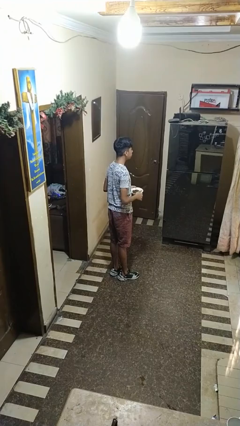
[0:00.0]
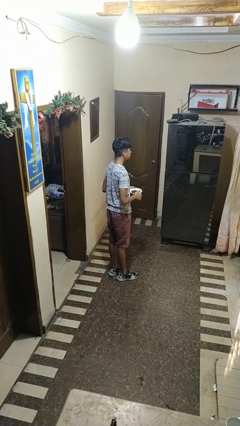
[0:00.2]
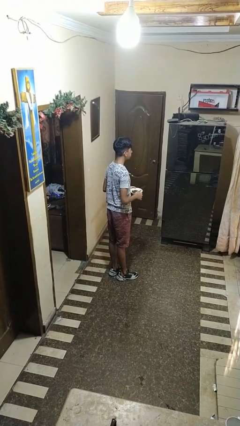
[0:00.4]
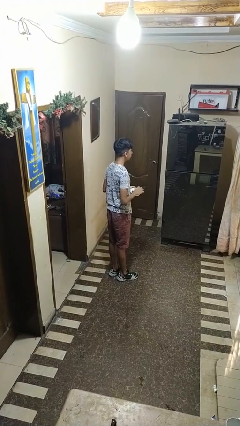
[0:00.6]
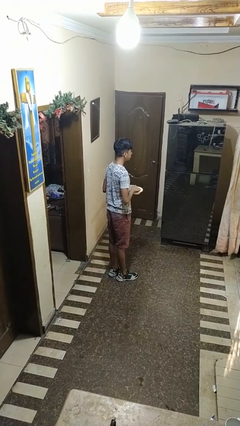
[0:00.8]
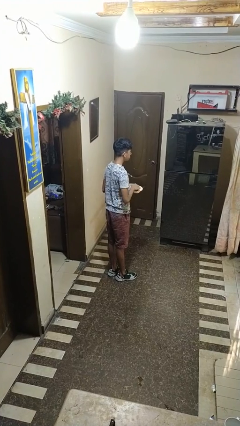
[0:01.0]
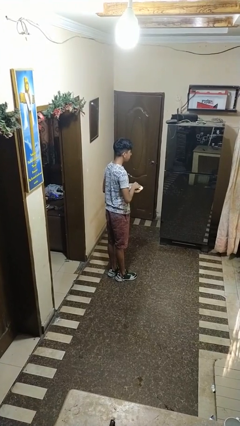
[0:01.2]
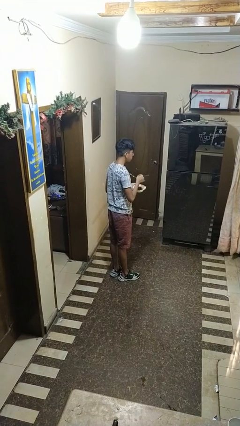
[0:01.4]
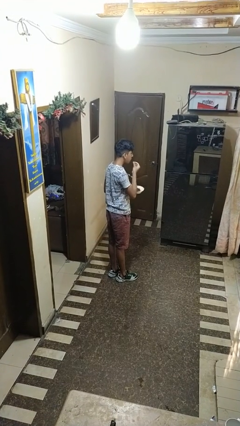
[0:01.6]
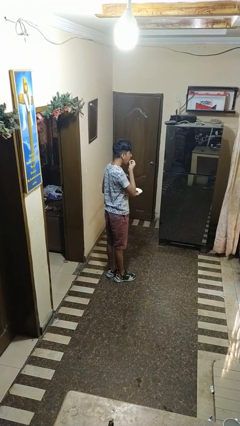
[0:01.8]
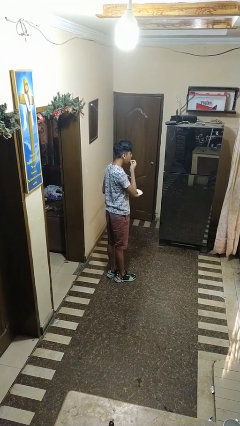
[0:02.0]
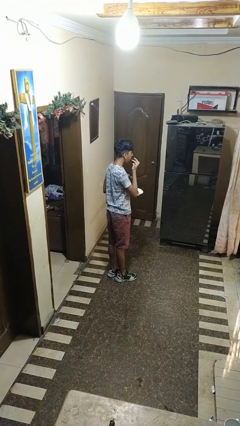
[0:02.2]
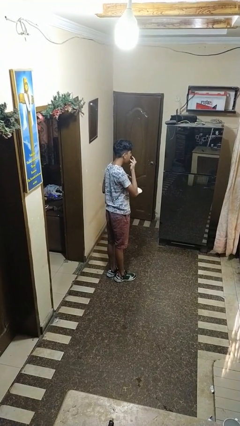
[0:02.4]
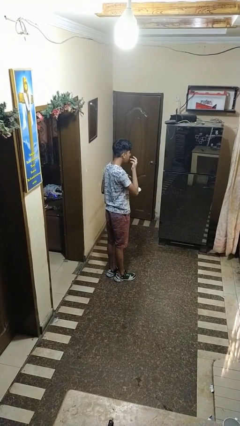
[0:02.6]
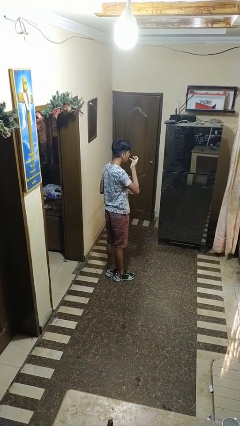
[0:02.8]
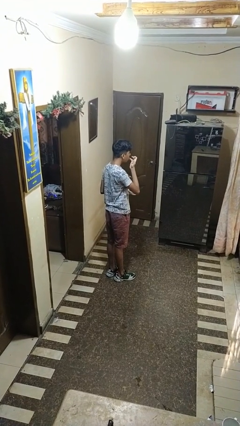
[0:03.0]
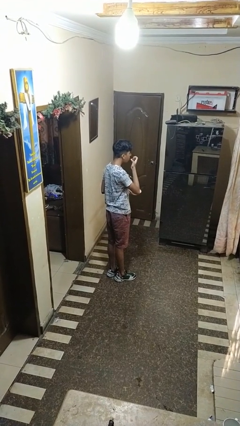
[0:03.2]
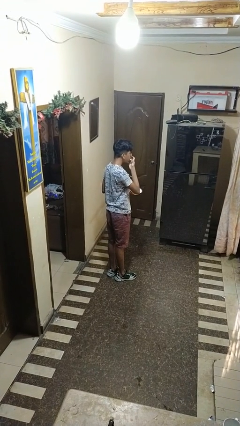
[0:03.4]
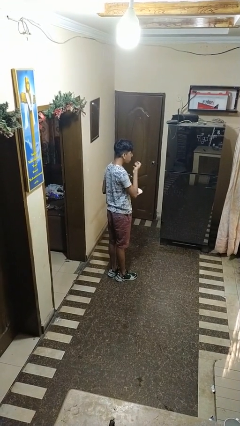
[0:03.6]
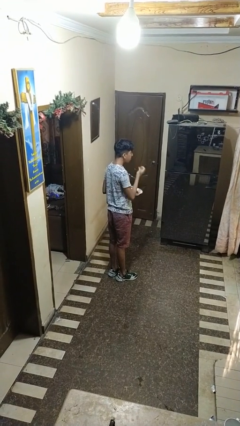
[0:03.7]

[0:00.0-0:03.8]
person licks fingers

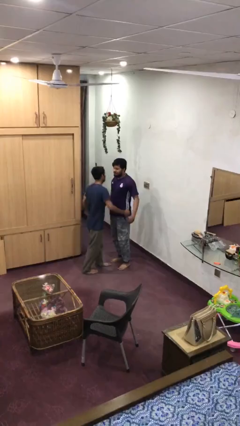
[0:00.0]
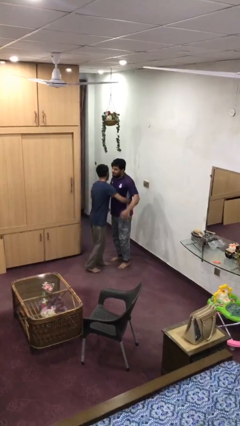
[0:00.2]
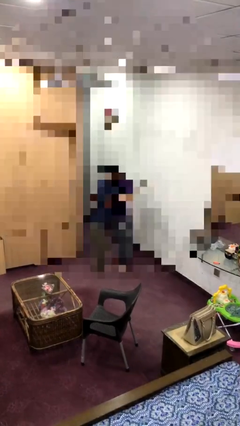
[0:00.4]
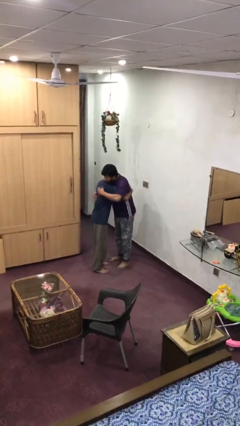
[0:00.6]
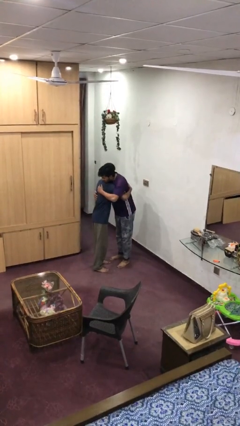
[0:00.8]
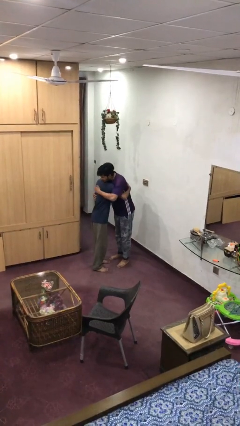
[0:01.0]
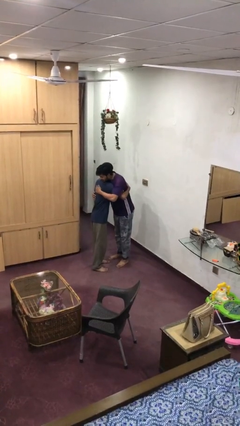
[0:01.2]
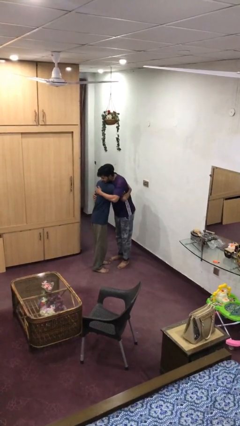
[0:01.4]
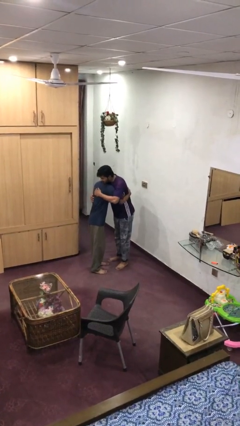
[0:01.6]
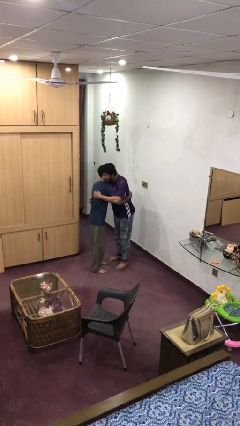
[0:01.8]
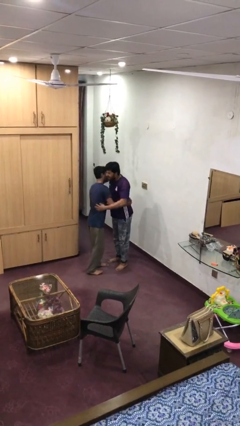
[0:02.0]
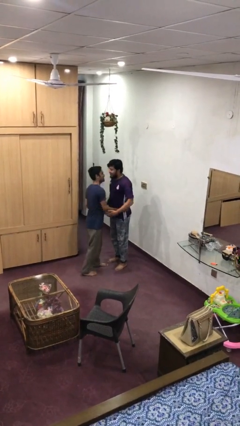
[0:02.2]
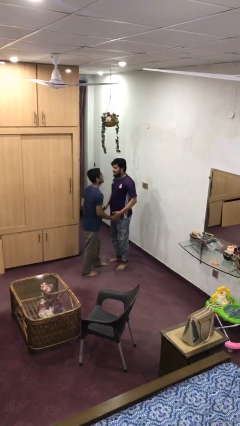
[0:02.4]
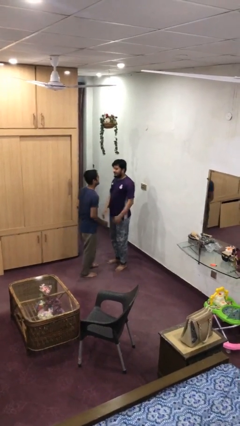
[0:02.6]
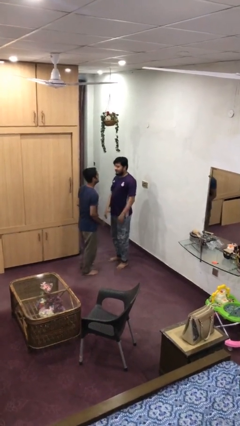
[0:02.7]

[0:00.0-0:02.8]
person embraces person

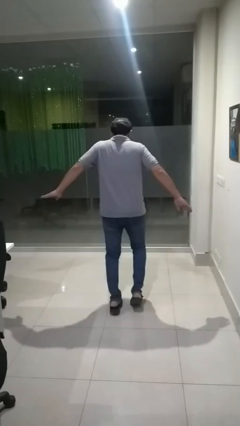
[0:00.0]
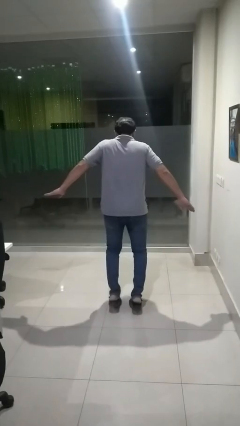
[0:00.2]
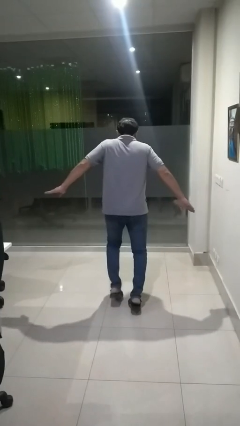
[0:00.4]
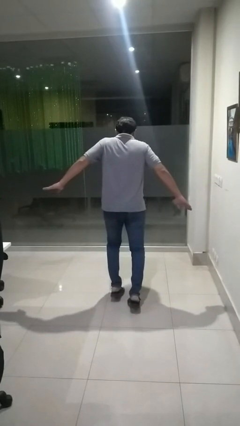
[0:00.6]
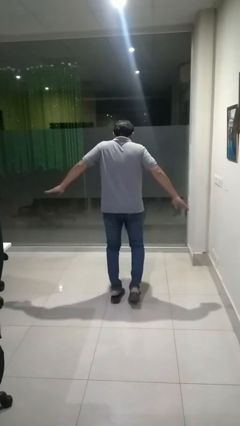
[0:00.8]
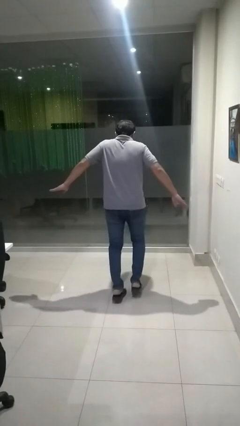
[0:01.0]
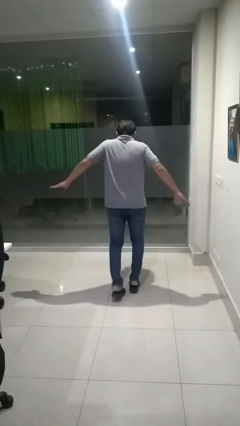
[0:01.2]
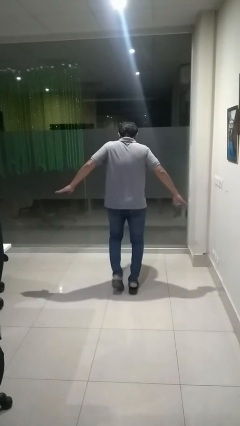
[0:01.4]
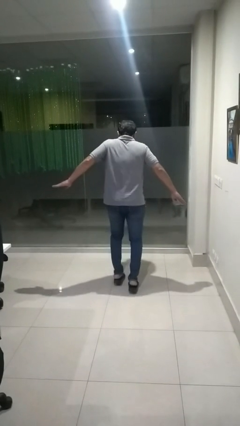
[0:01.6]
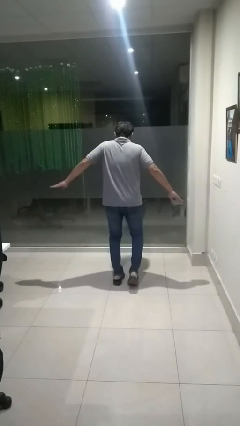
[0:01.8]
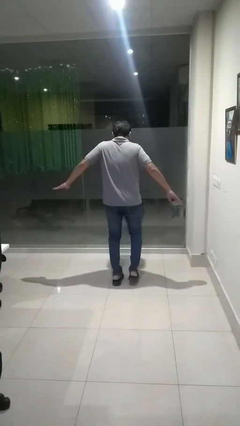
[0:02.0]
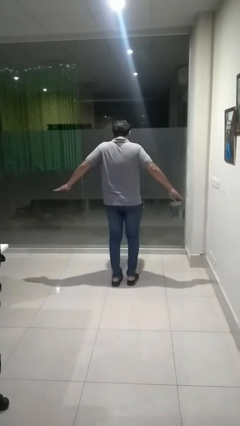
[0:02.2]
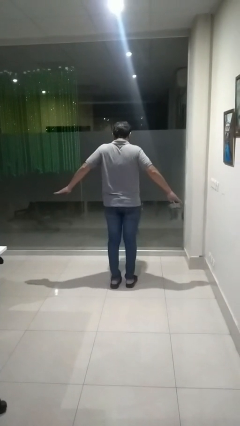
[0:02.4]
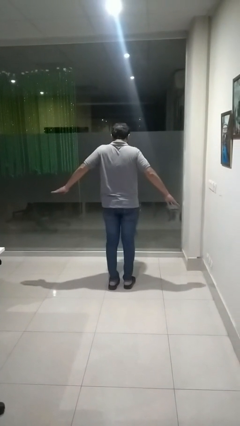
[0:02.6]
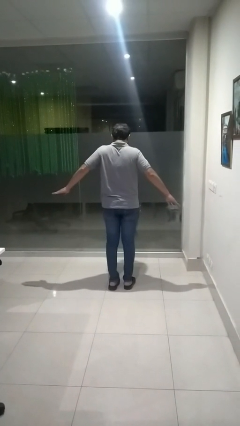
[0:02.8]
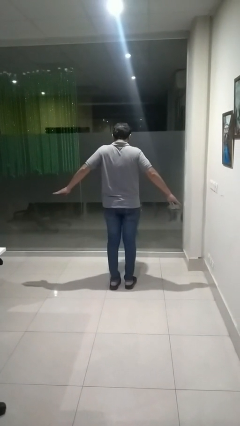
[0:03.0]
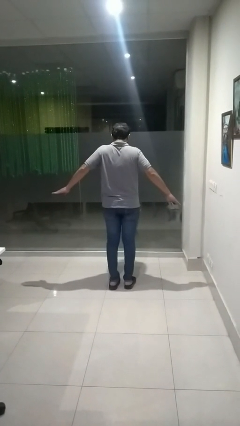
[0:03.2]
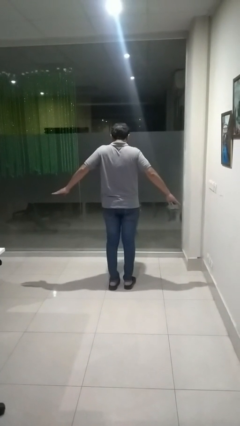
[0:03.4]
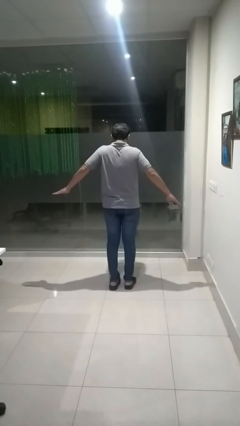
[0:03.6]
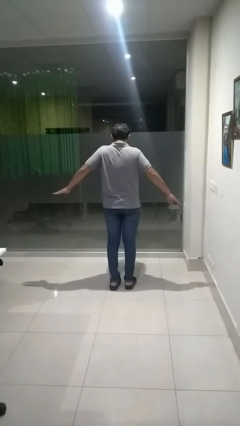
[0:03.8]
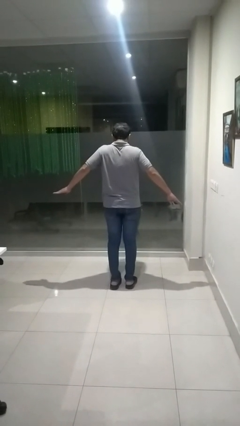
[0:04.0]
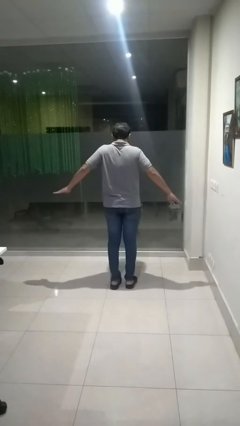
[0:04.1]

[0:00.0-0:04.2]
person walks tiptoe

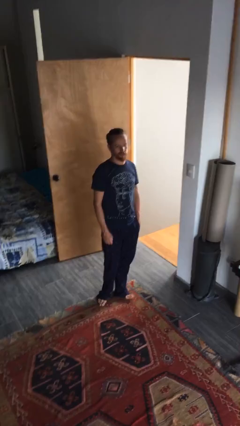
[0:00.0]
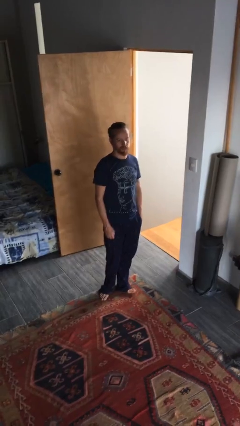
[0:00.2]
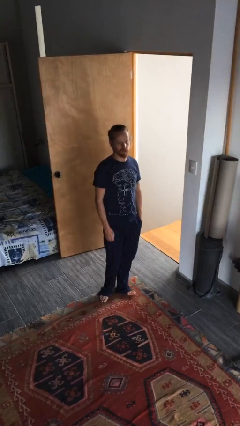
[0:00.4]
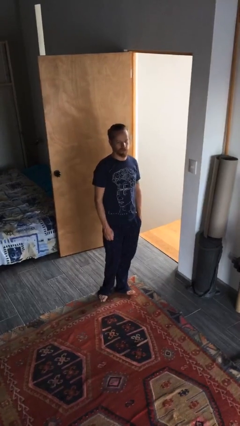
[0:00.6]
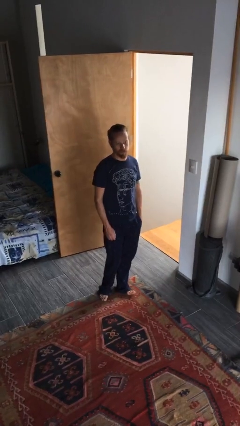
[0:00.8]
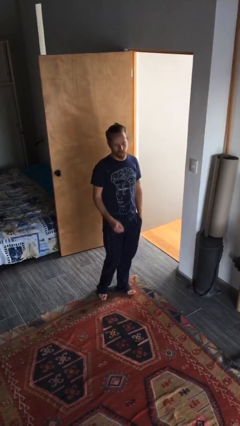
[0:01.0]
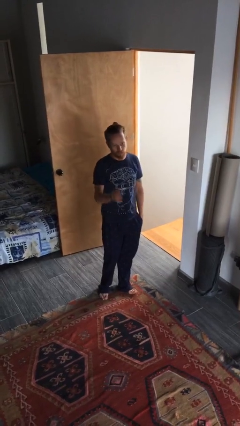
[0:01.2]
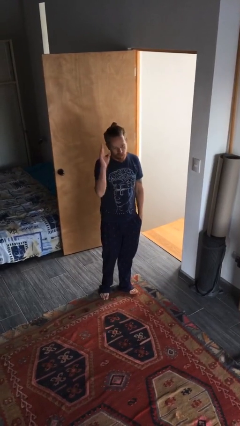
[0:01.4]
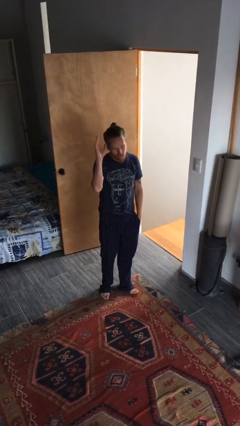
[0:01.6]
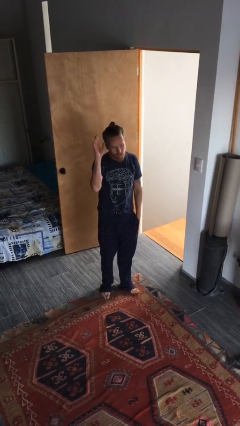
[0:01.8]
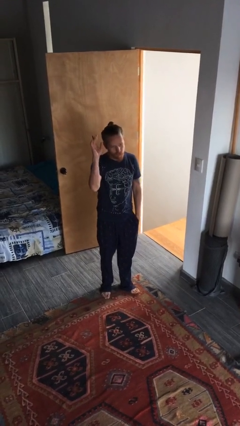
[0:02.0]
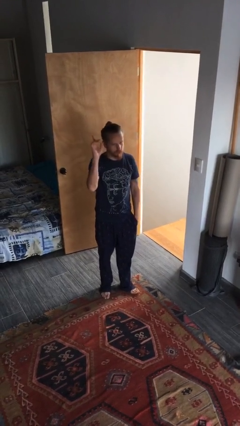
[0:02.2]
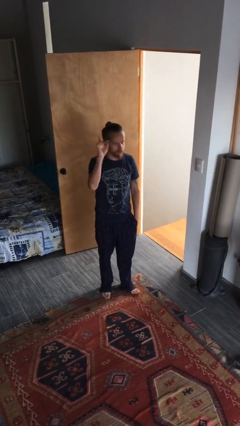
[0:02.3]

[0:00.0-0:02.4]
person gestures raise hand

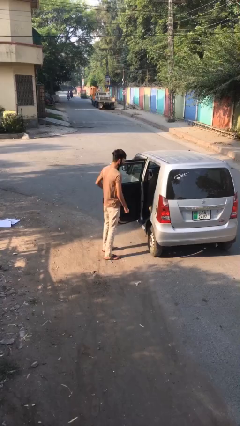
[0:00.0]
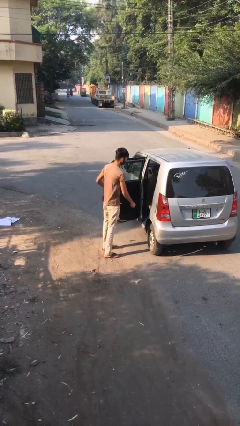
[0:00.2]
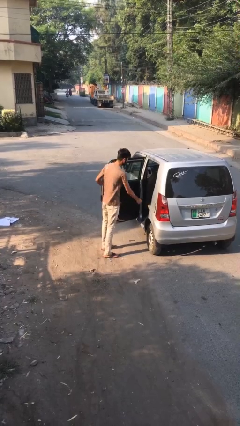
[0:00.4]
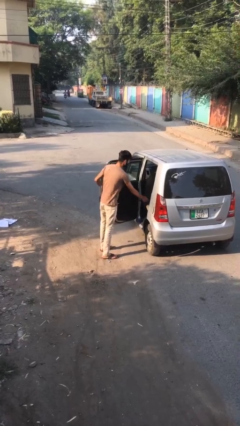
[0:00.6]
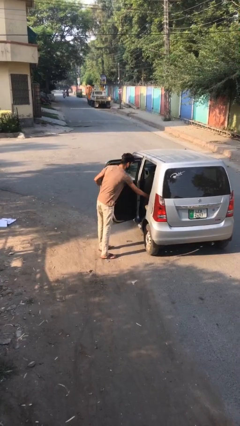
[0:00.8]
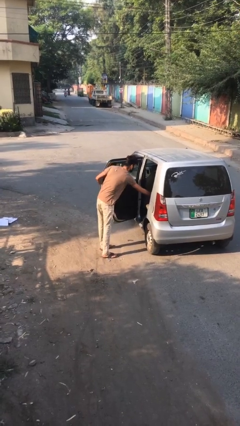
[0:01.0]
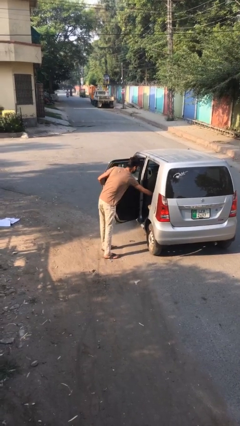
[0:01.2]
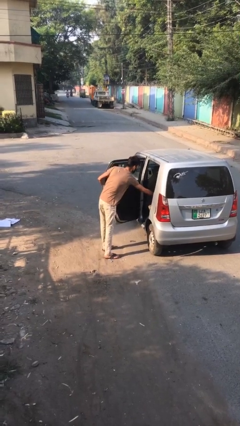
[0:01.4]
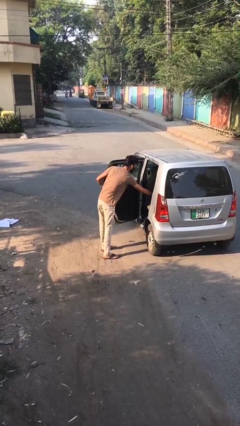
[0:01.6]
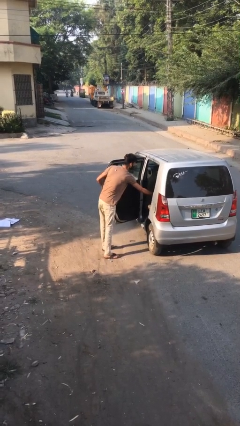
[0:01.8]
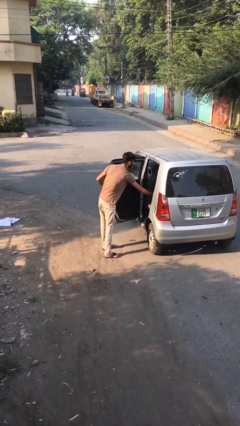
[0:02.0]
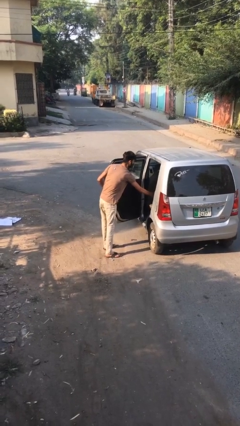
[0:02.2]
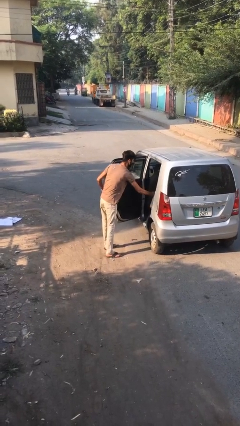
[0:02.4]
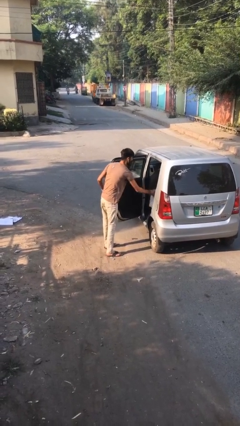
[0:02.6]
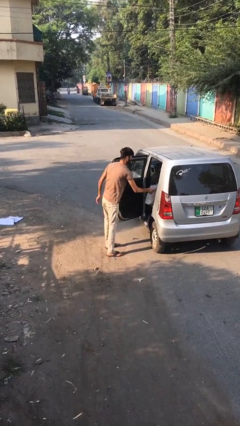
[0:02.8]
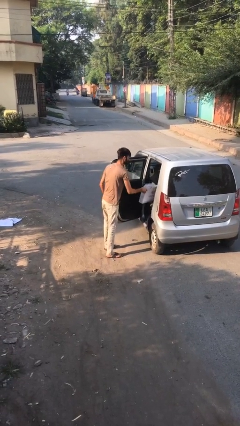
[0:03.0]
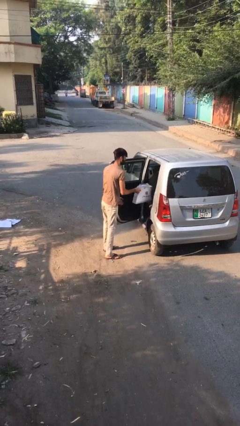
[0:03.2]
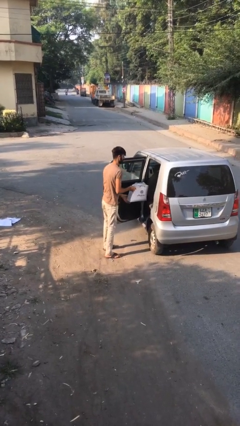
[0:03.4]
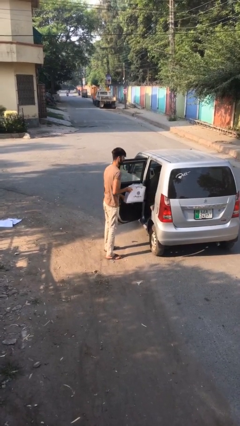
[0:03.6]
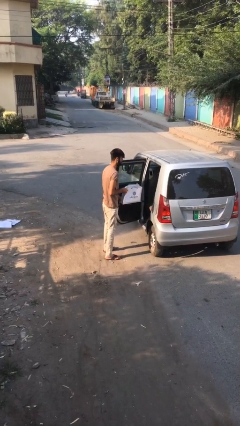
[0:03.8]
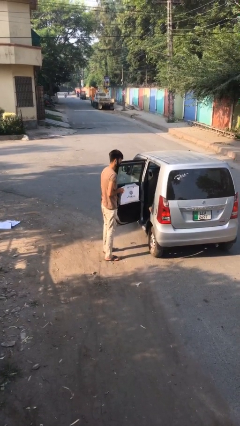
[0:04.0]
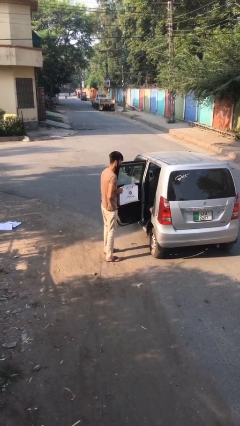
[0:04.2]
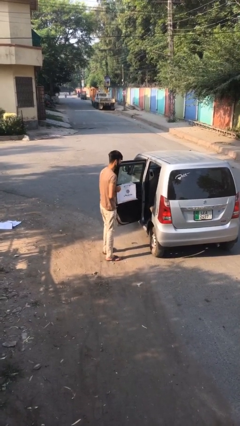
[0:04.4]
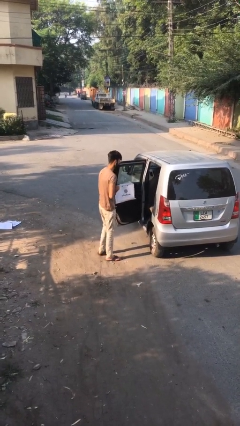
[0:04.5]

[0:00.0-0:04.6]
person unloads car
